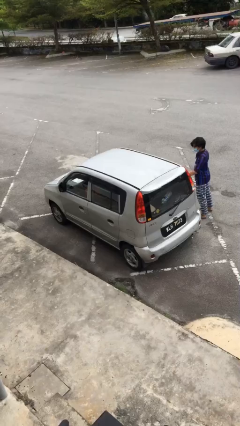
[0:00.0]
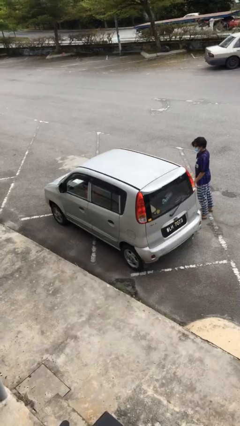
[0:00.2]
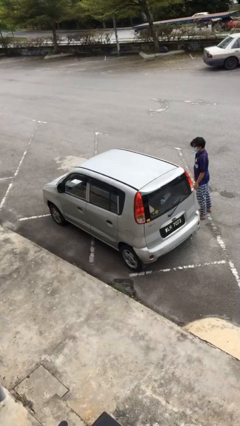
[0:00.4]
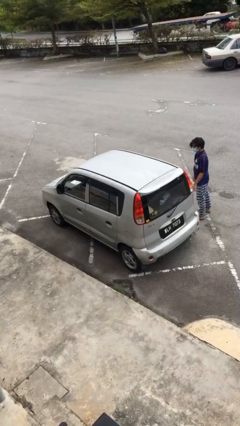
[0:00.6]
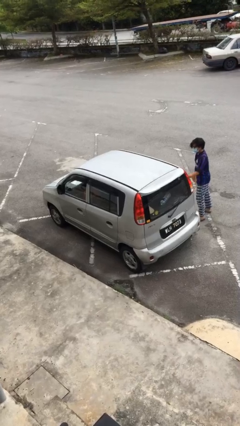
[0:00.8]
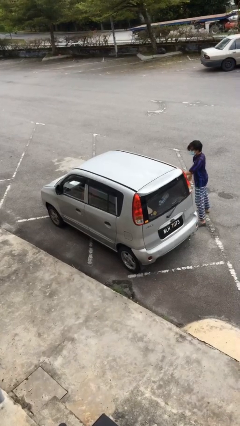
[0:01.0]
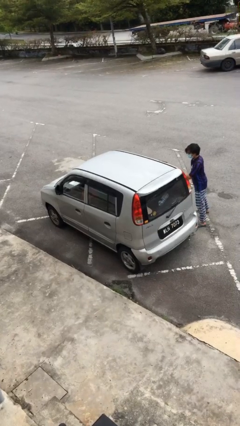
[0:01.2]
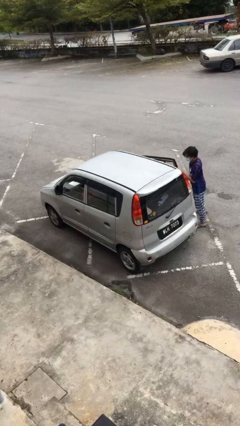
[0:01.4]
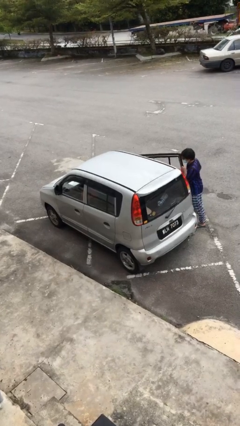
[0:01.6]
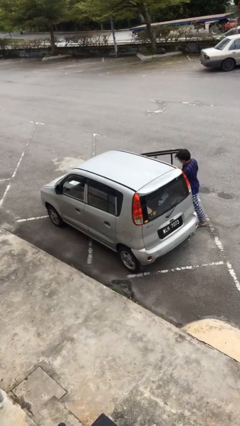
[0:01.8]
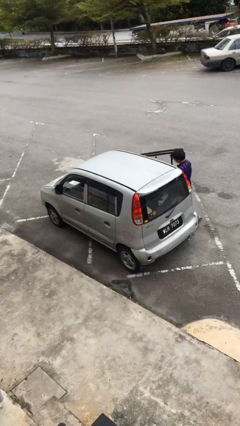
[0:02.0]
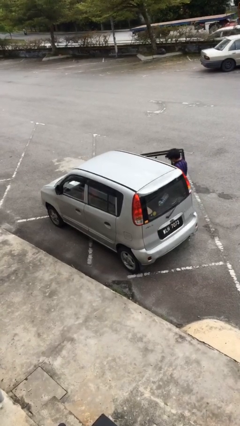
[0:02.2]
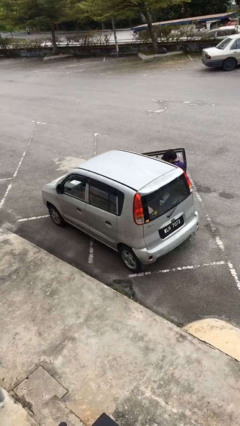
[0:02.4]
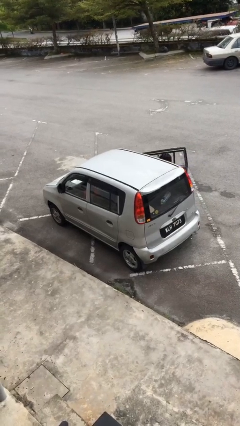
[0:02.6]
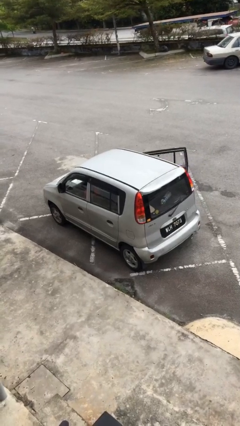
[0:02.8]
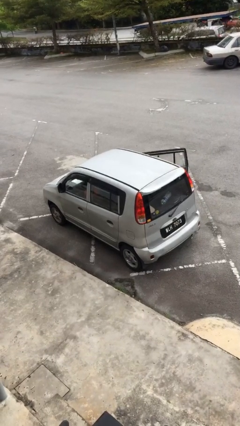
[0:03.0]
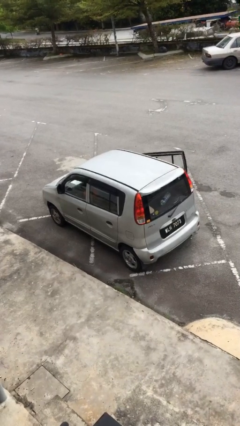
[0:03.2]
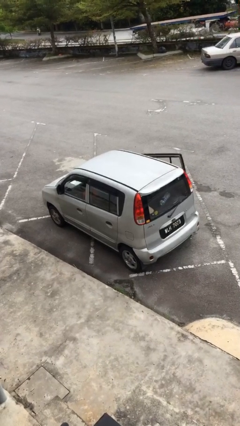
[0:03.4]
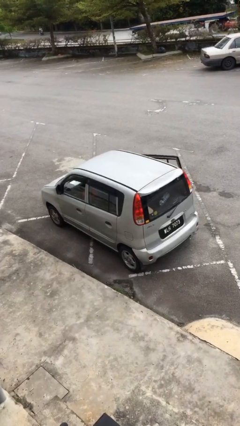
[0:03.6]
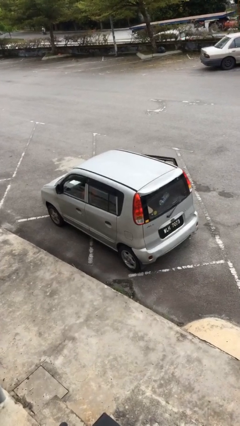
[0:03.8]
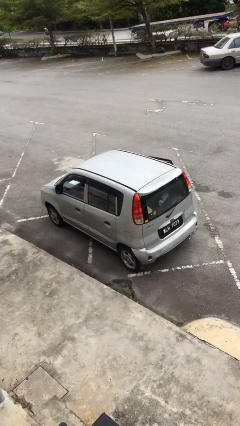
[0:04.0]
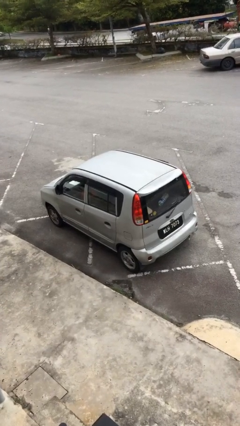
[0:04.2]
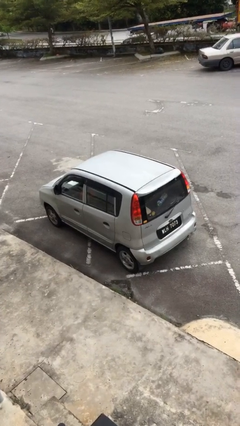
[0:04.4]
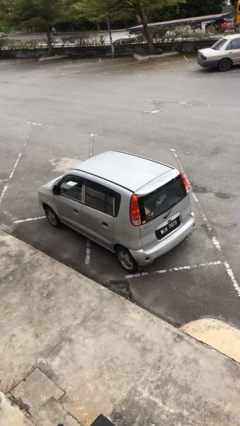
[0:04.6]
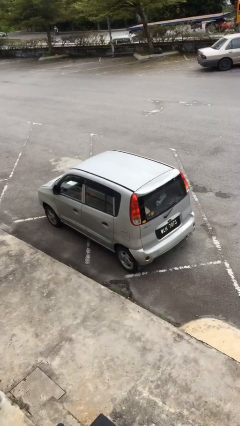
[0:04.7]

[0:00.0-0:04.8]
car picks up person

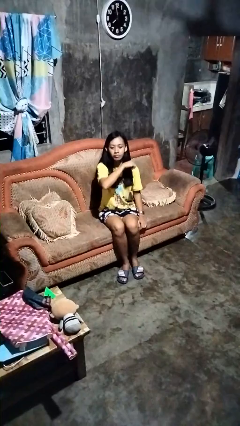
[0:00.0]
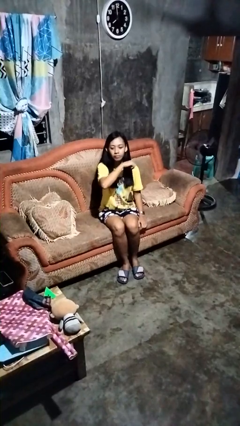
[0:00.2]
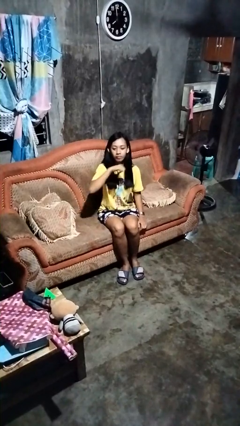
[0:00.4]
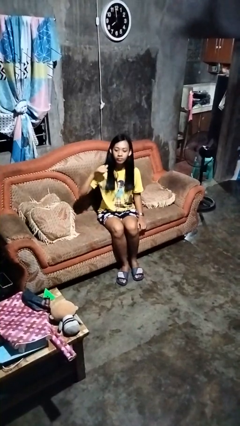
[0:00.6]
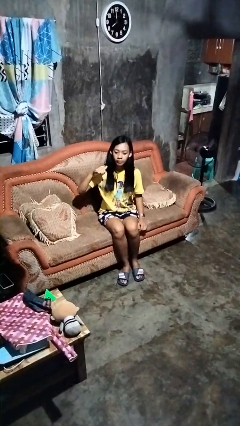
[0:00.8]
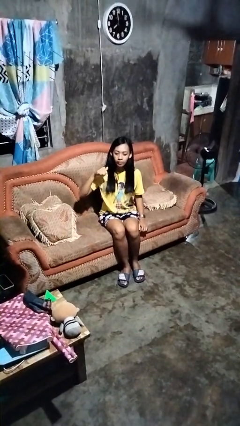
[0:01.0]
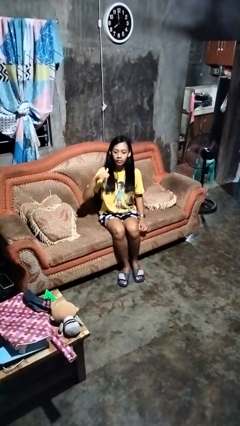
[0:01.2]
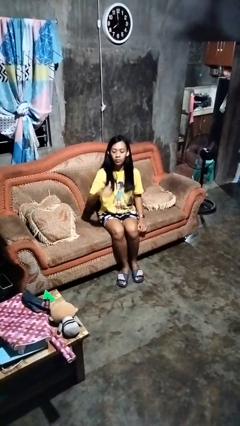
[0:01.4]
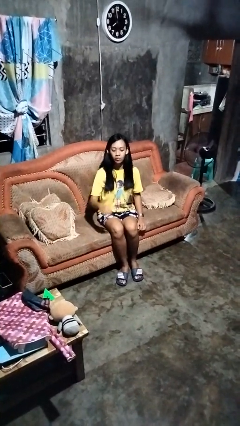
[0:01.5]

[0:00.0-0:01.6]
person gestures cut

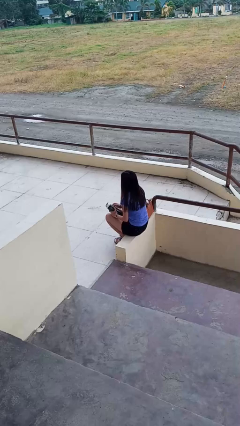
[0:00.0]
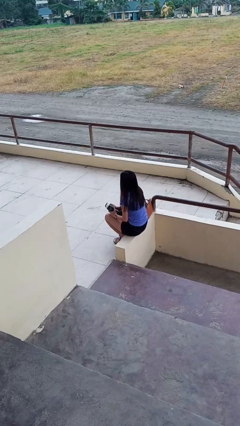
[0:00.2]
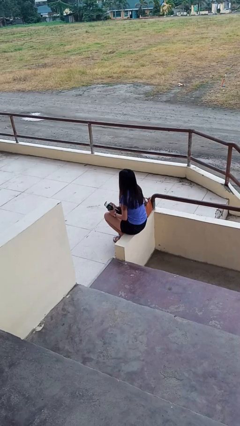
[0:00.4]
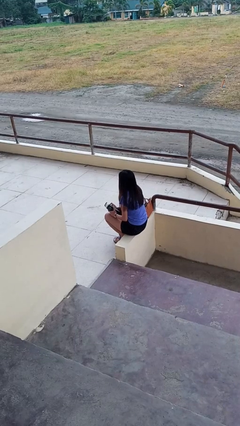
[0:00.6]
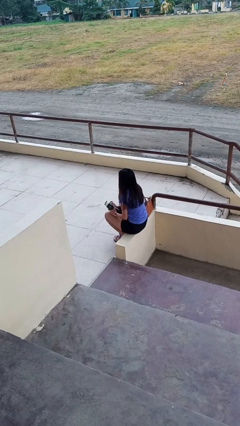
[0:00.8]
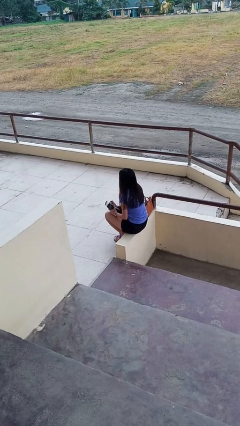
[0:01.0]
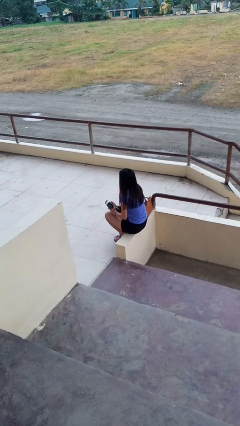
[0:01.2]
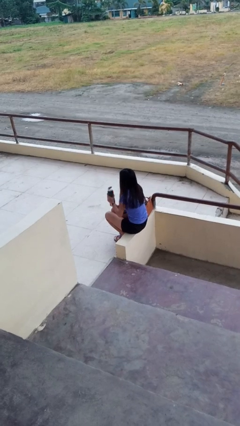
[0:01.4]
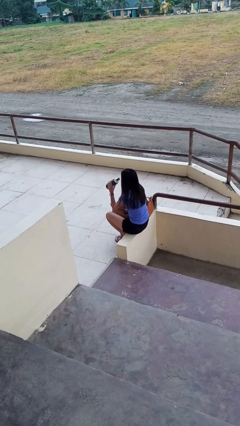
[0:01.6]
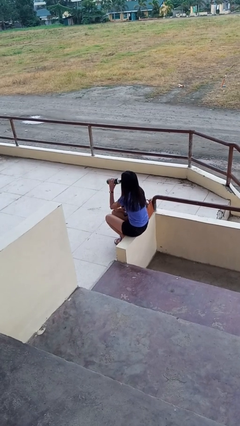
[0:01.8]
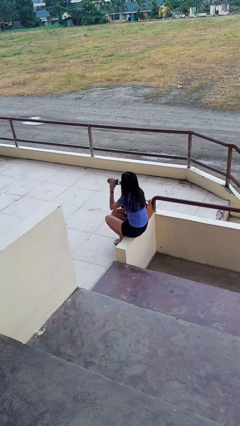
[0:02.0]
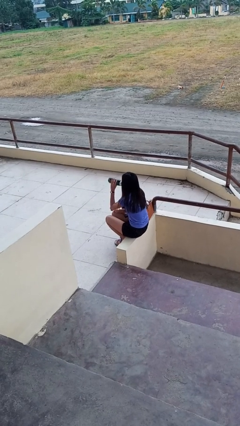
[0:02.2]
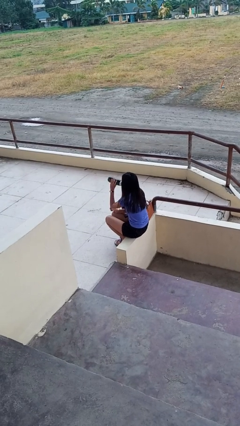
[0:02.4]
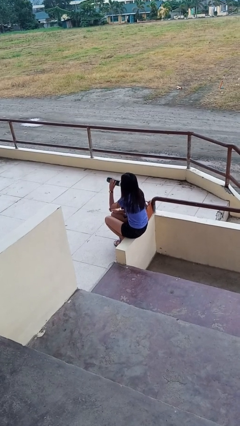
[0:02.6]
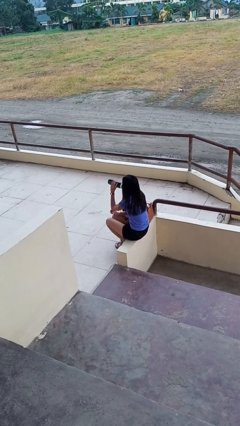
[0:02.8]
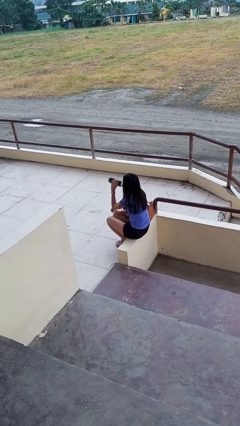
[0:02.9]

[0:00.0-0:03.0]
person drinks from bottle

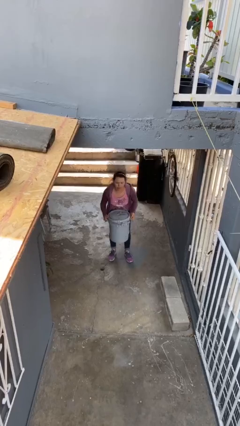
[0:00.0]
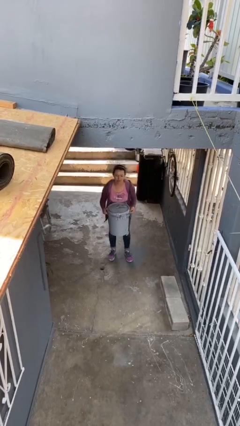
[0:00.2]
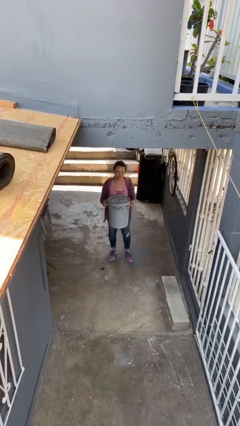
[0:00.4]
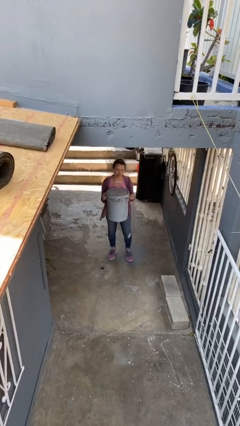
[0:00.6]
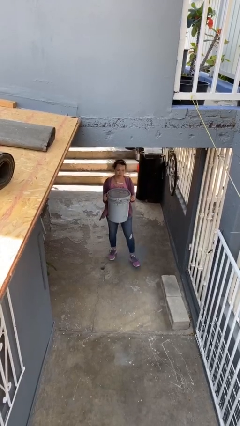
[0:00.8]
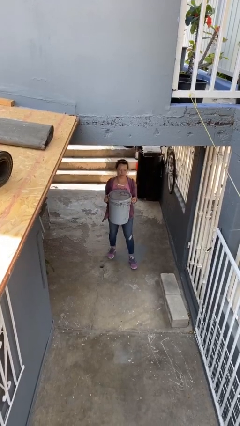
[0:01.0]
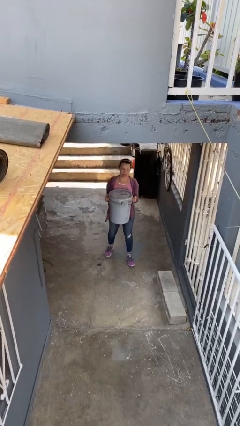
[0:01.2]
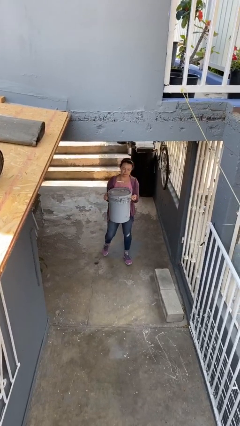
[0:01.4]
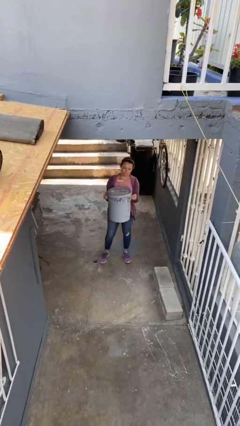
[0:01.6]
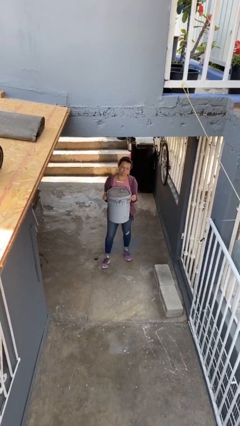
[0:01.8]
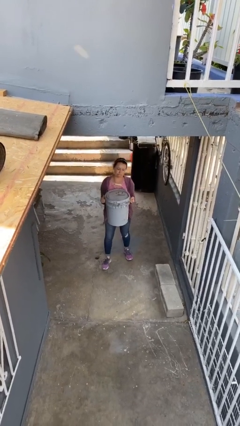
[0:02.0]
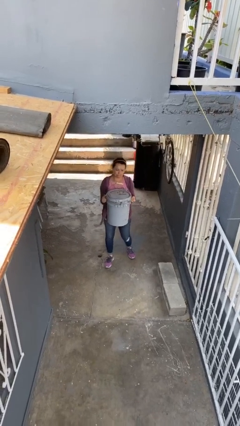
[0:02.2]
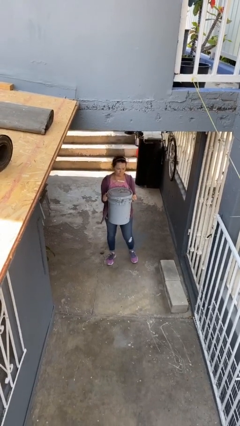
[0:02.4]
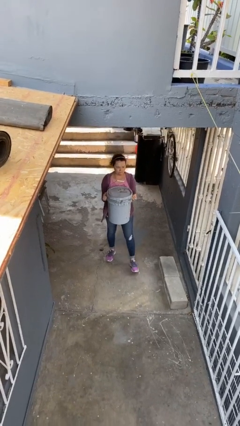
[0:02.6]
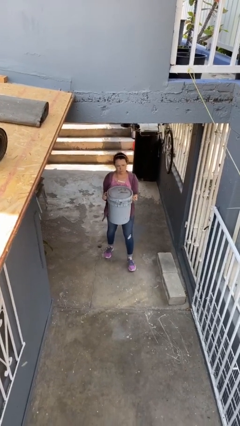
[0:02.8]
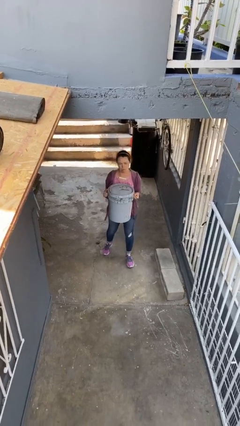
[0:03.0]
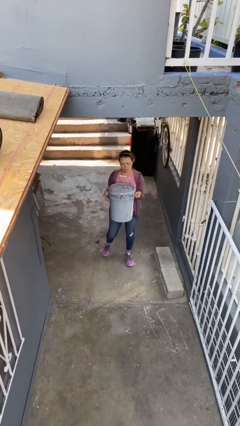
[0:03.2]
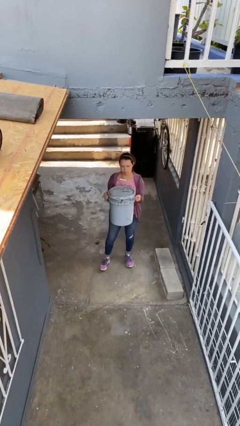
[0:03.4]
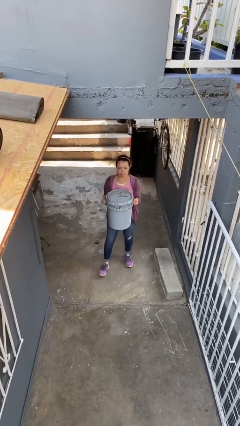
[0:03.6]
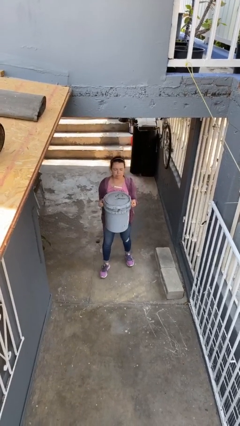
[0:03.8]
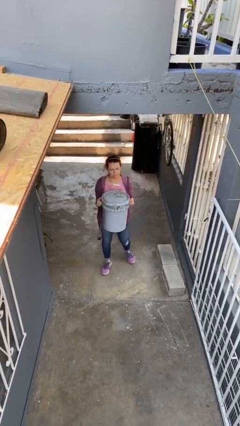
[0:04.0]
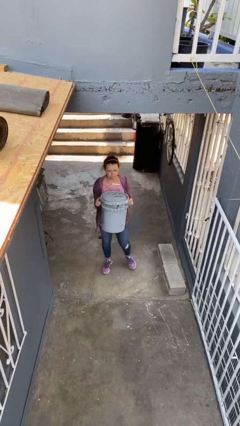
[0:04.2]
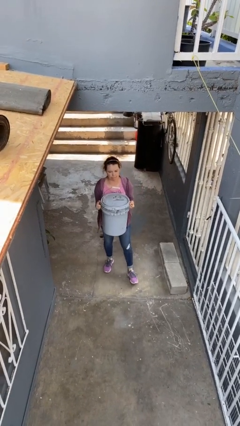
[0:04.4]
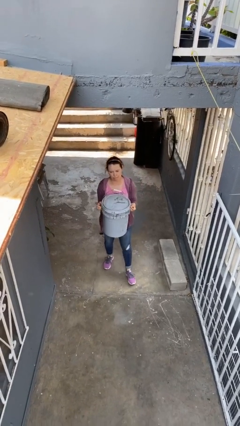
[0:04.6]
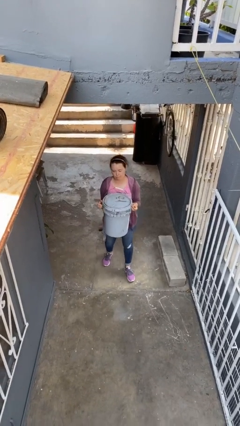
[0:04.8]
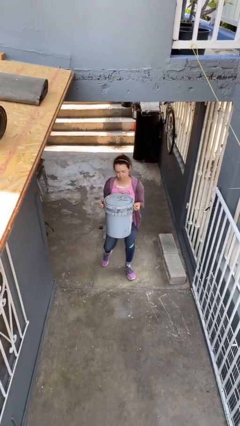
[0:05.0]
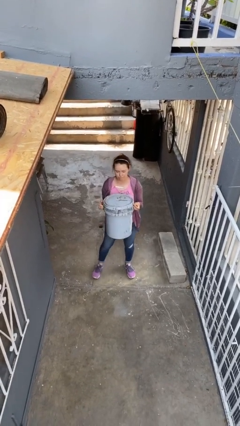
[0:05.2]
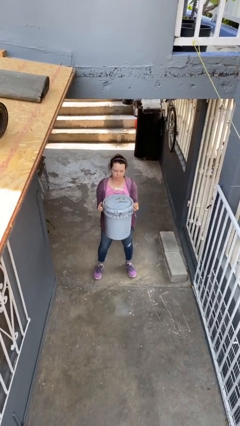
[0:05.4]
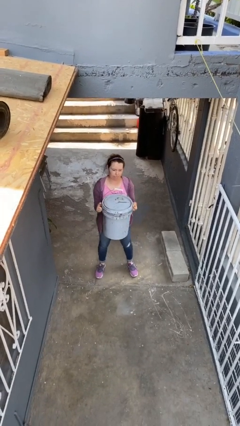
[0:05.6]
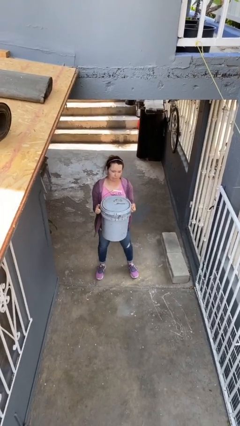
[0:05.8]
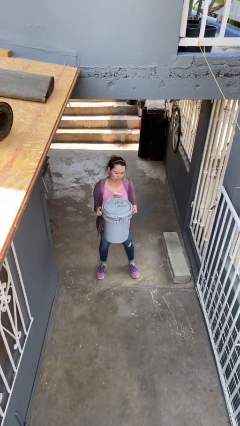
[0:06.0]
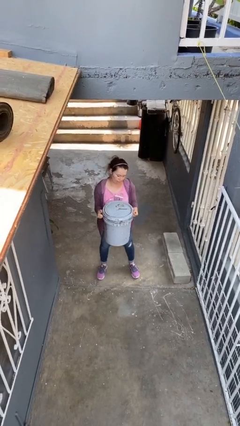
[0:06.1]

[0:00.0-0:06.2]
person carries heavy object

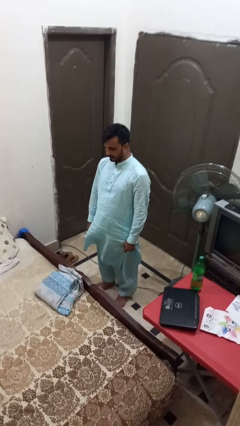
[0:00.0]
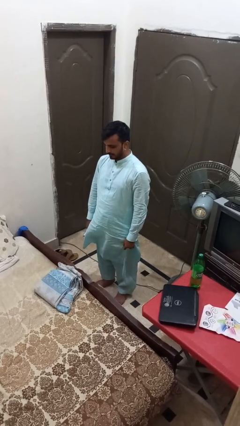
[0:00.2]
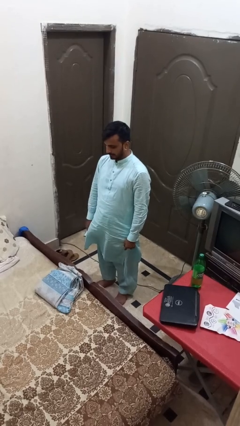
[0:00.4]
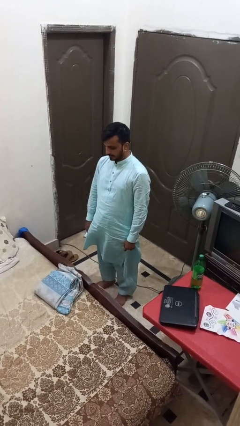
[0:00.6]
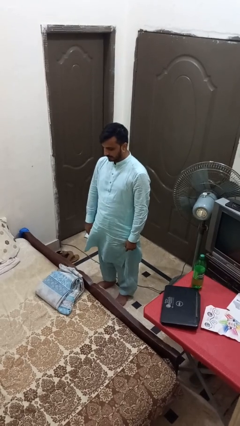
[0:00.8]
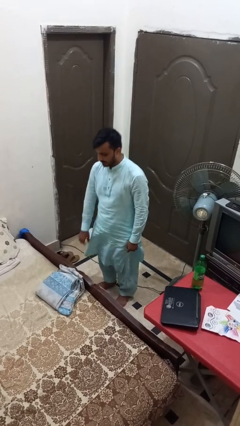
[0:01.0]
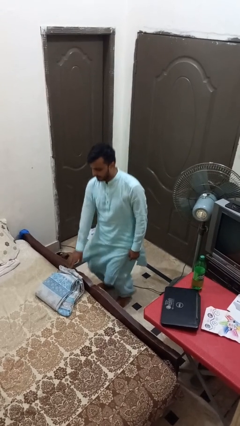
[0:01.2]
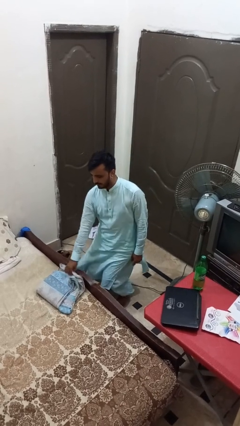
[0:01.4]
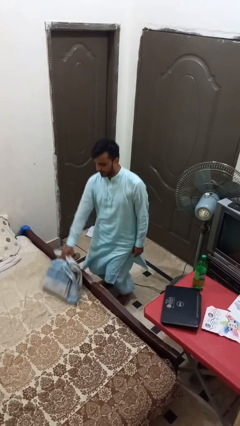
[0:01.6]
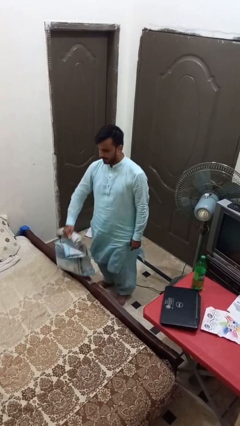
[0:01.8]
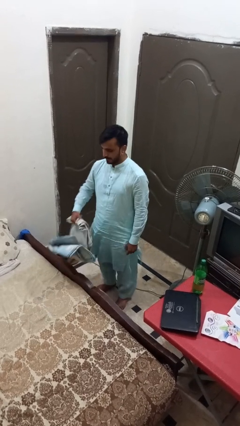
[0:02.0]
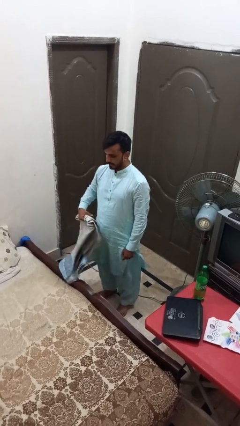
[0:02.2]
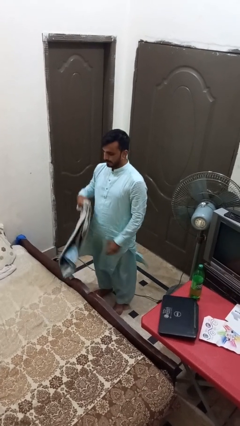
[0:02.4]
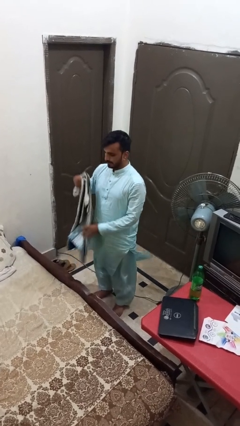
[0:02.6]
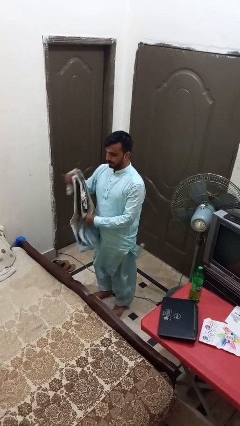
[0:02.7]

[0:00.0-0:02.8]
person picks up object from bed
